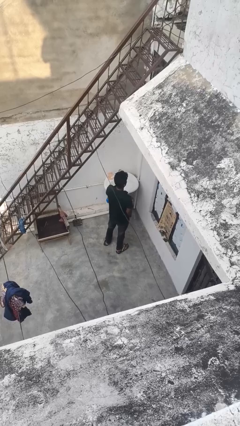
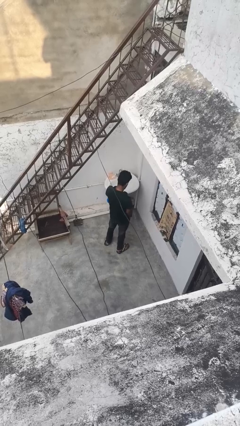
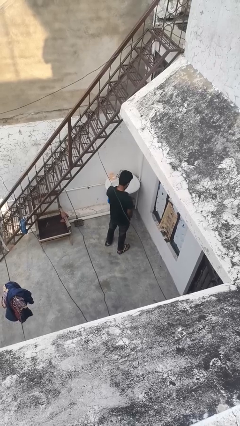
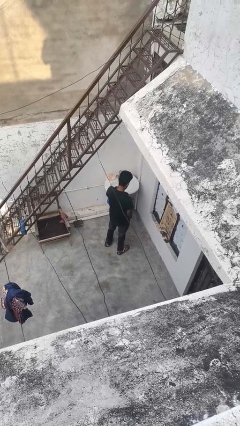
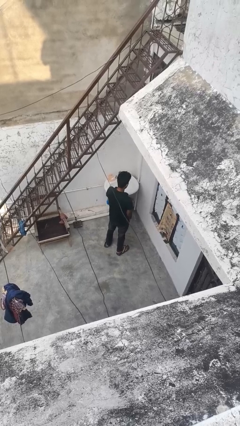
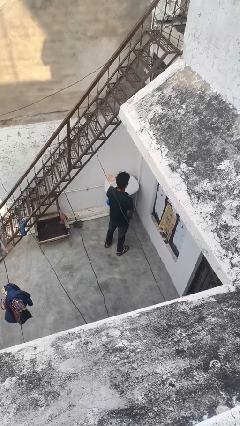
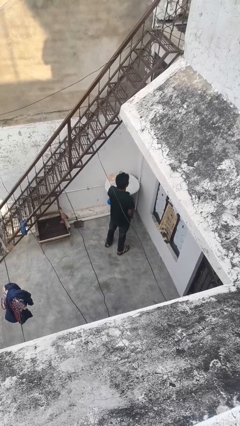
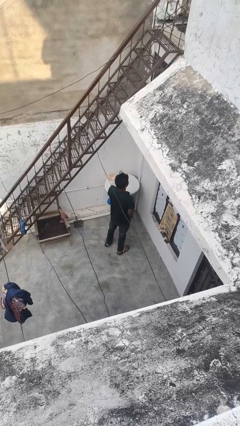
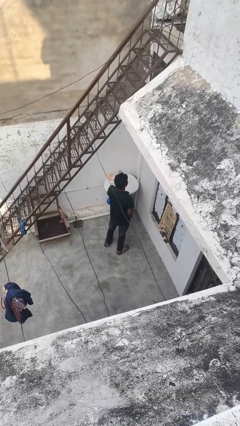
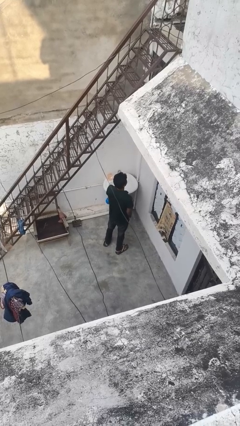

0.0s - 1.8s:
person strokes chin

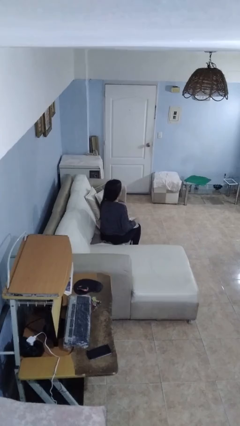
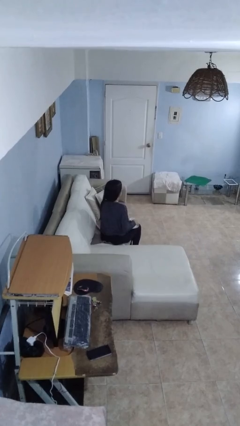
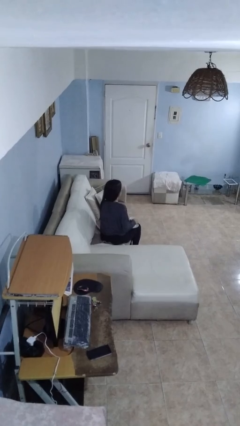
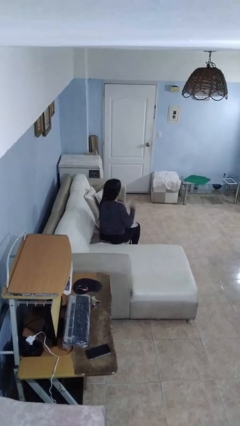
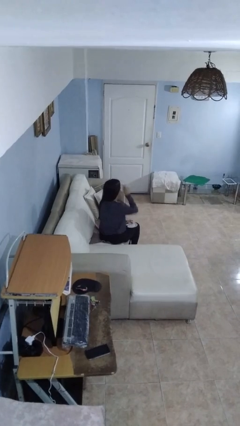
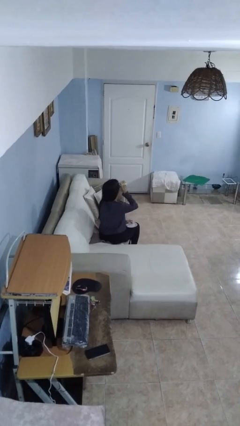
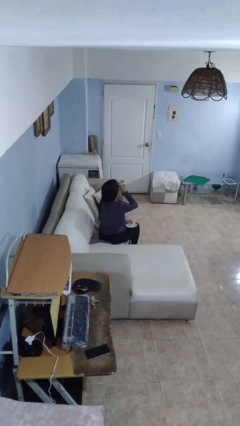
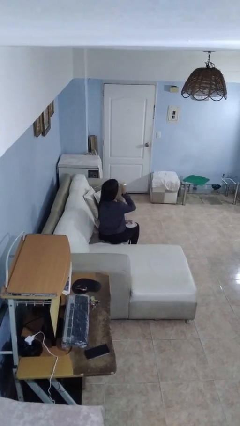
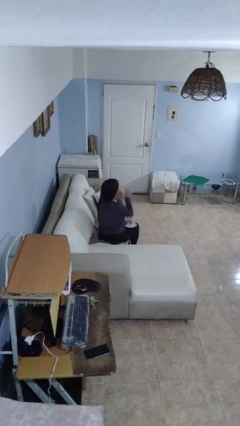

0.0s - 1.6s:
person drinks from mug

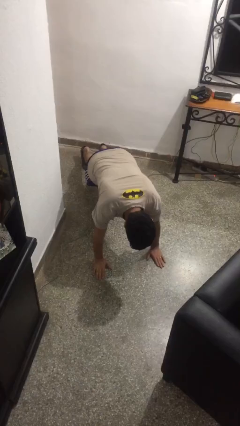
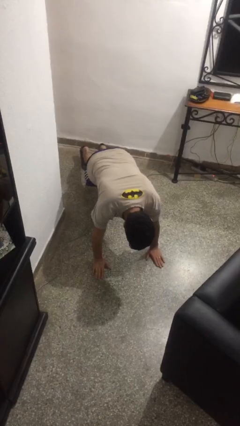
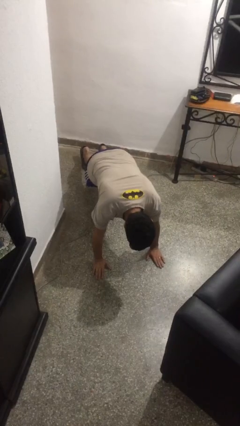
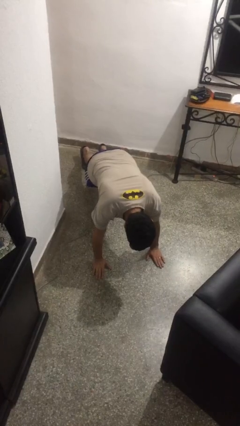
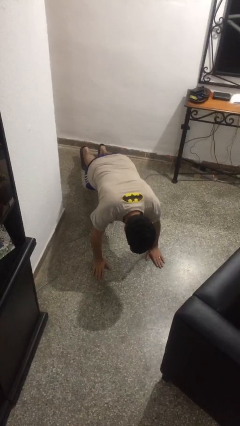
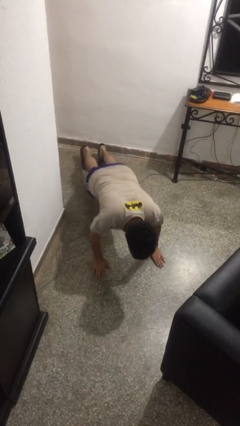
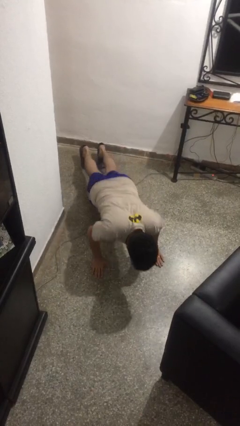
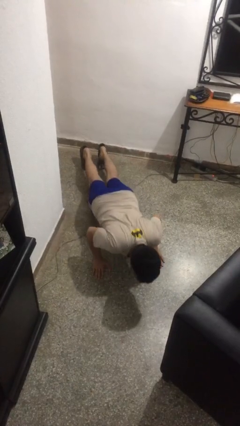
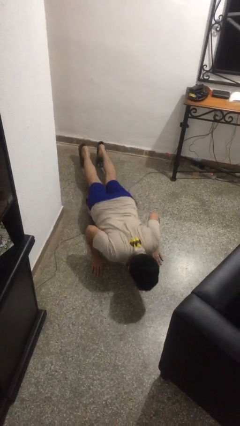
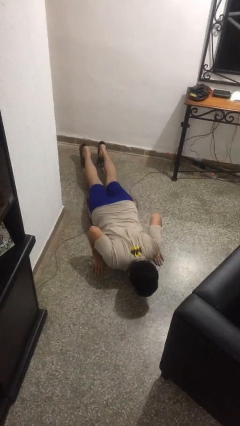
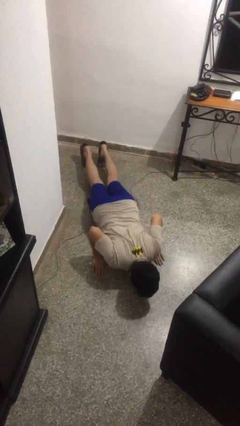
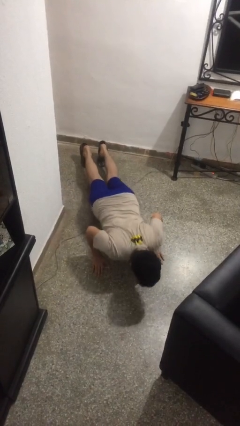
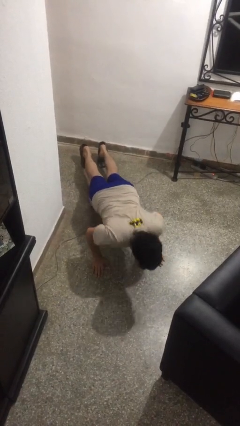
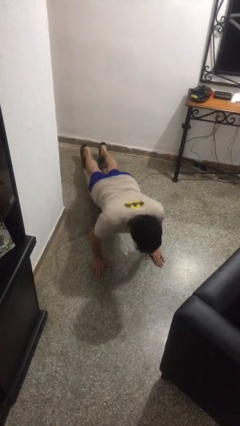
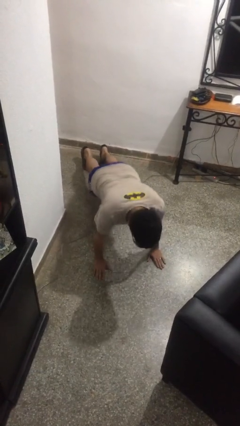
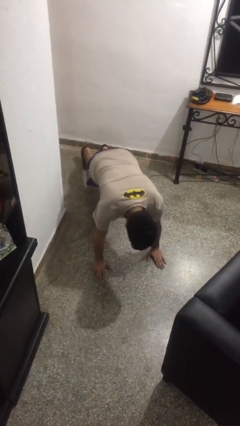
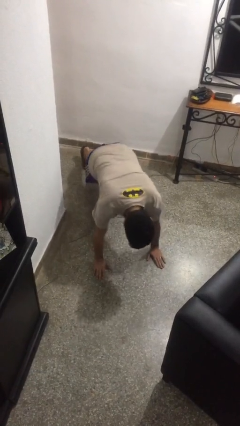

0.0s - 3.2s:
person exercises with pushup

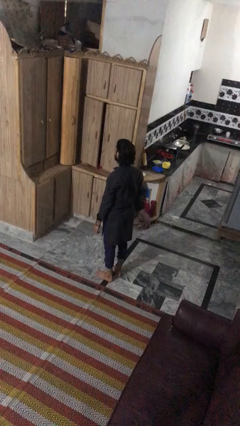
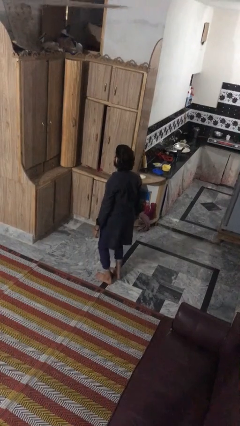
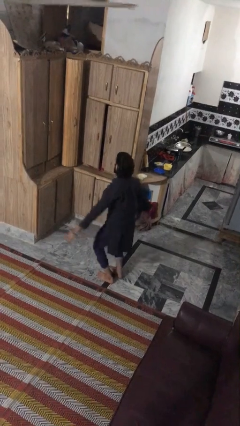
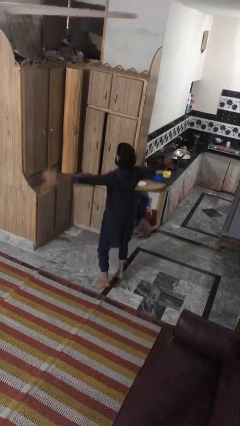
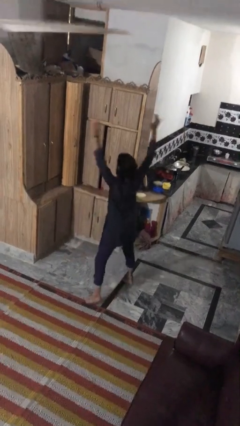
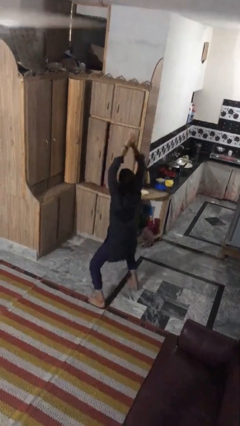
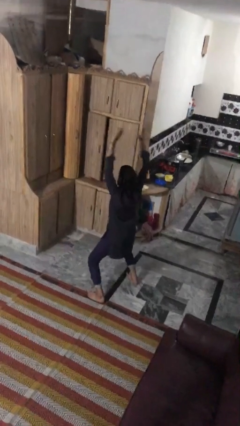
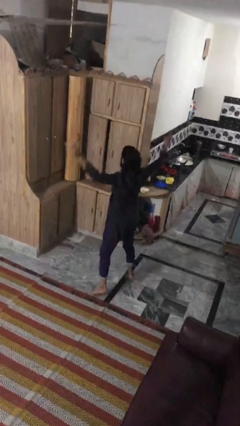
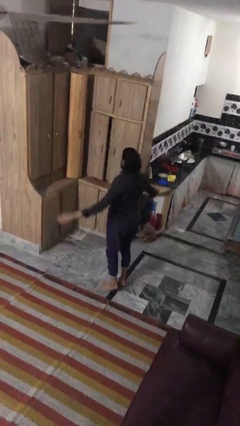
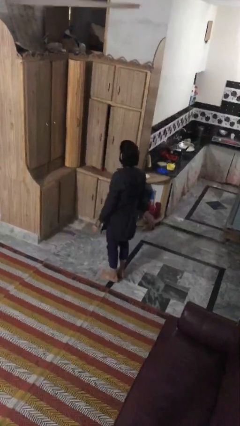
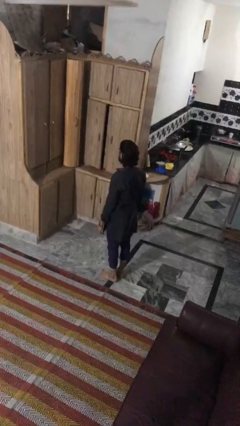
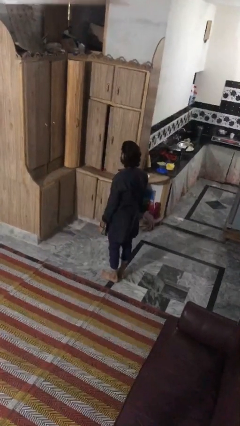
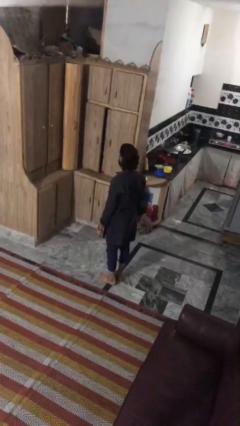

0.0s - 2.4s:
person exercises with jumping jacks

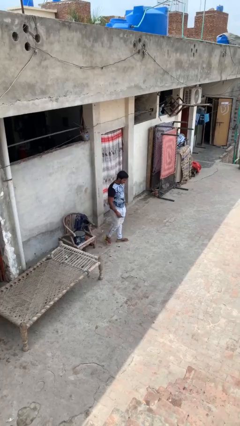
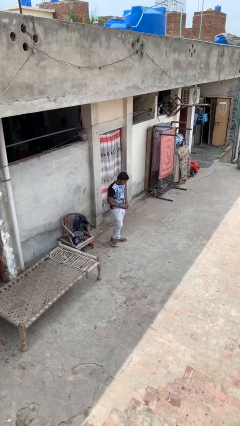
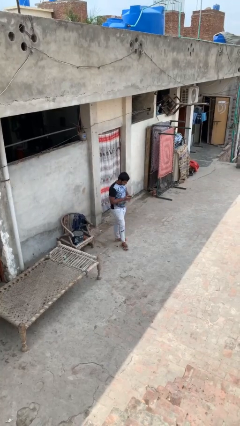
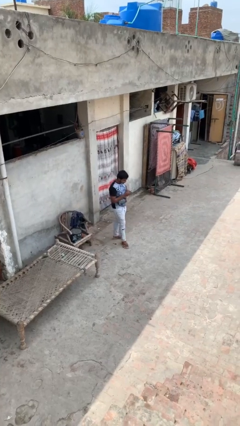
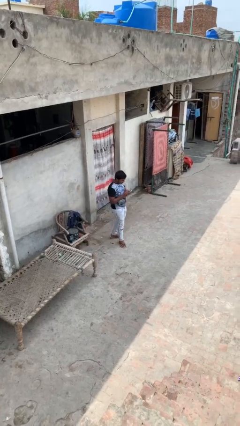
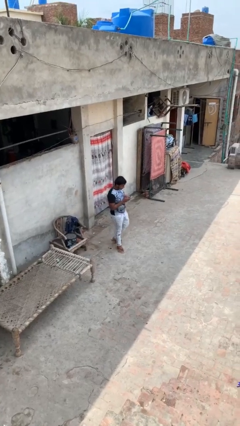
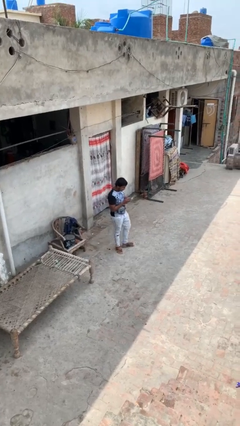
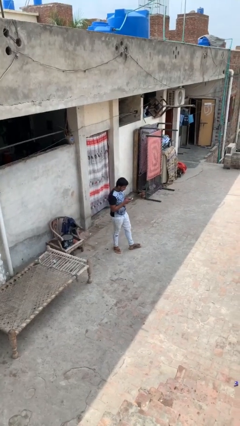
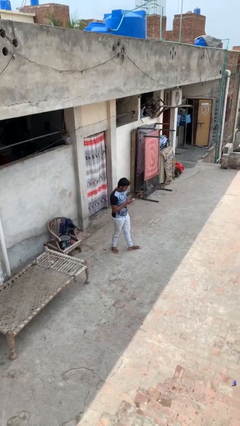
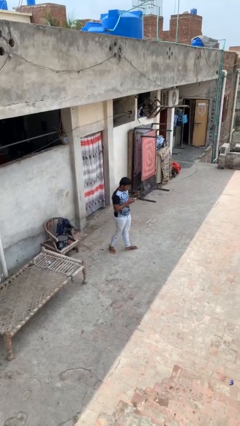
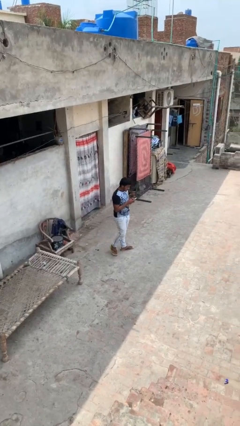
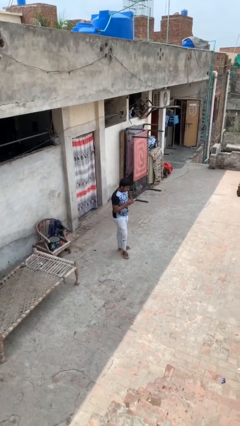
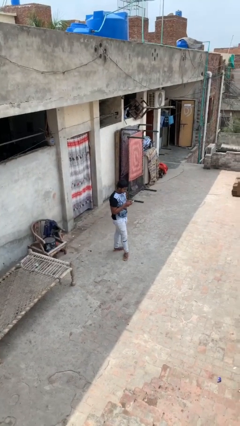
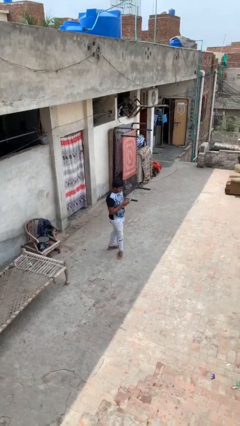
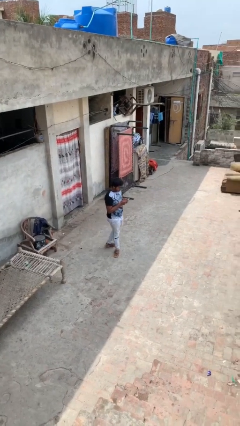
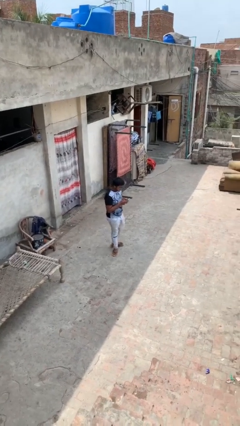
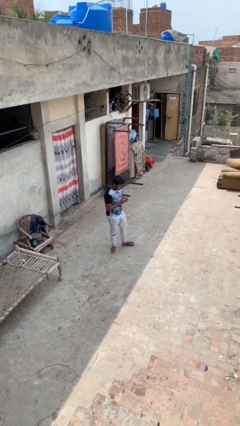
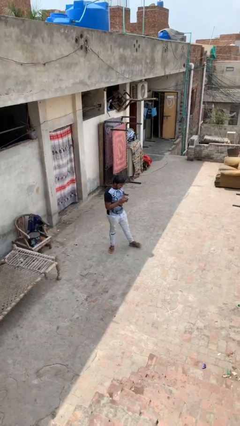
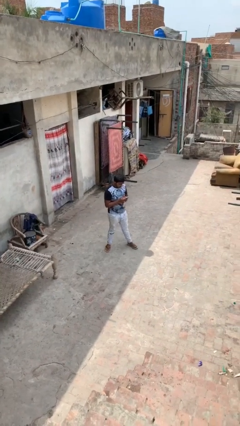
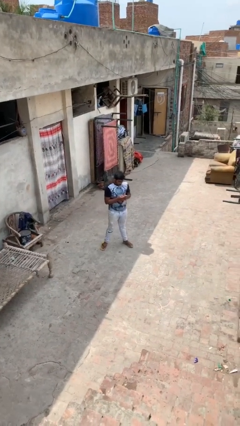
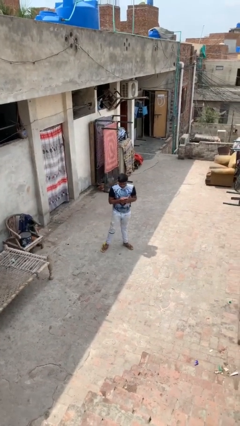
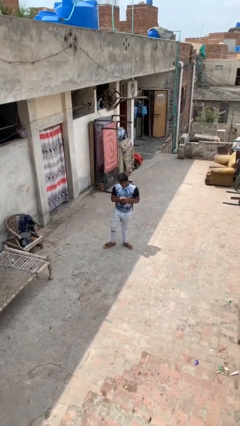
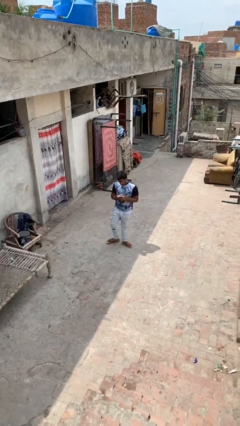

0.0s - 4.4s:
person texts on phone

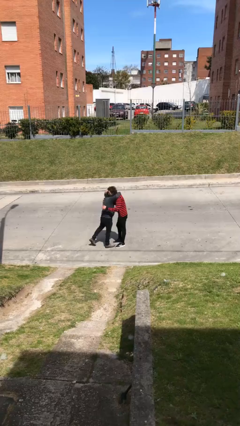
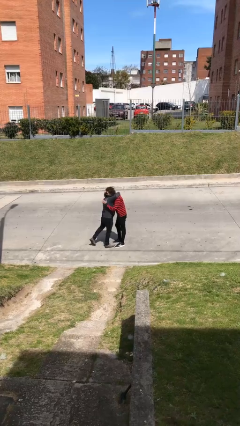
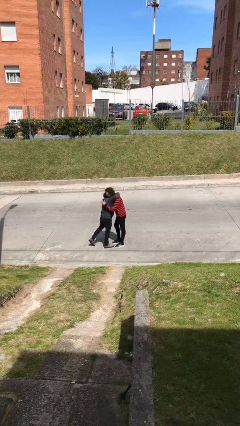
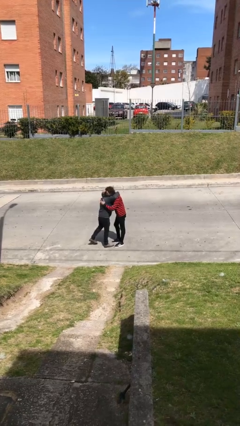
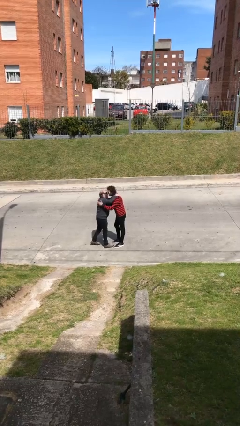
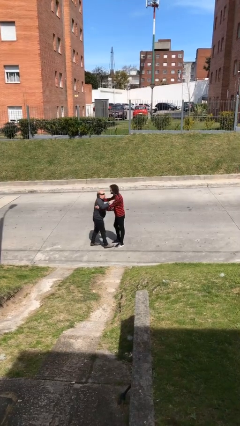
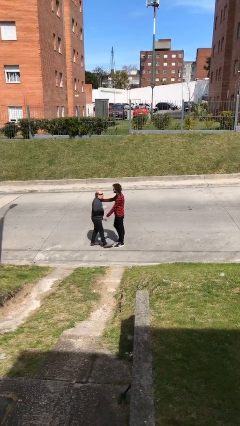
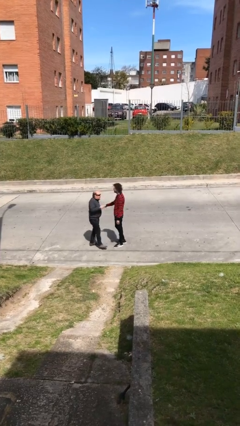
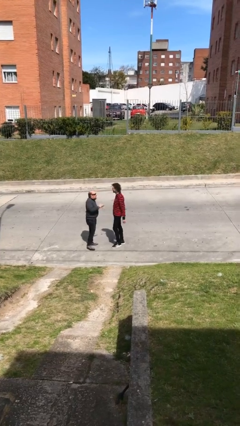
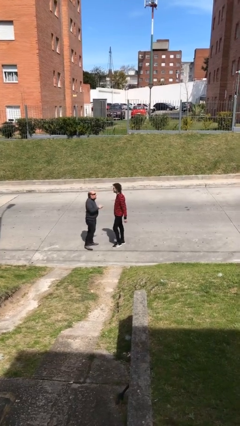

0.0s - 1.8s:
person embraces person

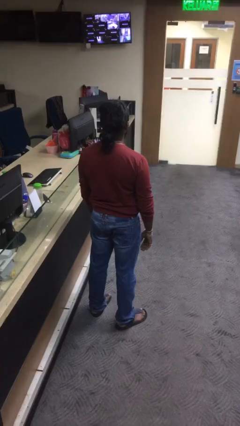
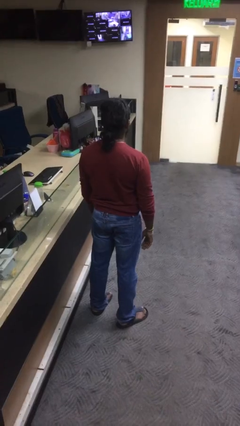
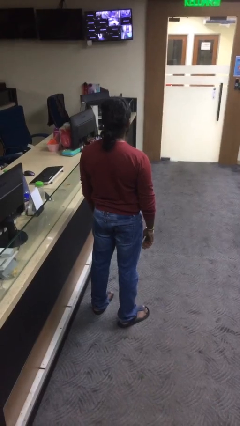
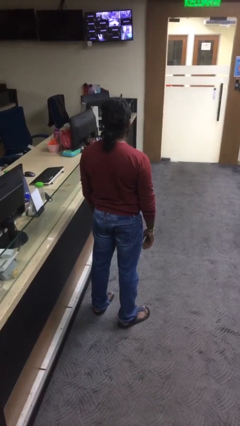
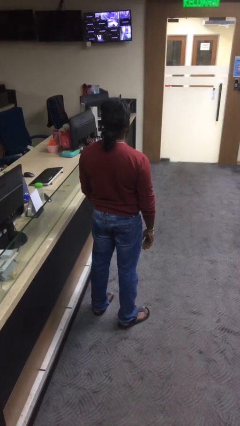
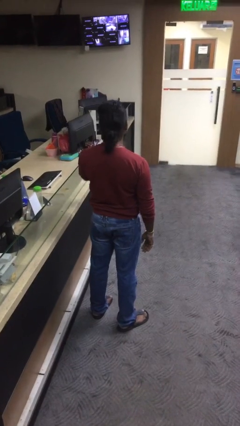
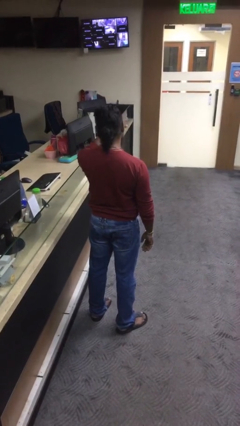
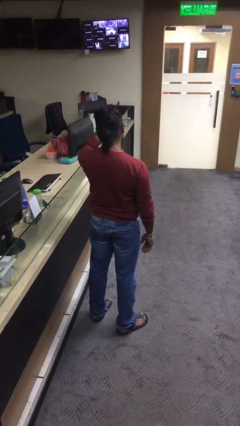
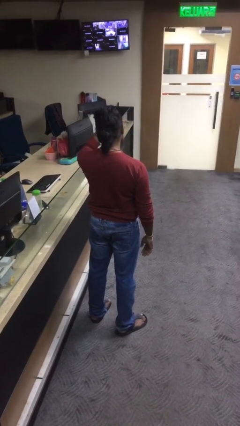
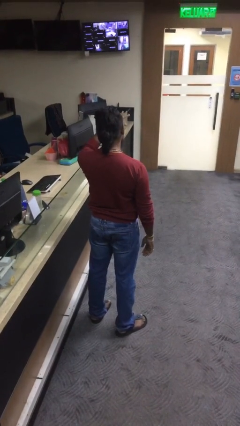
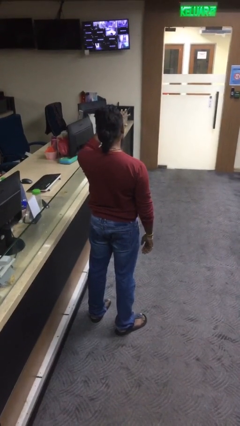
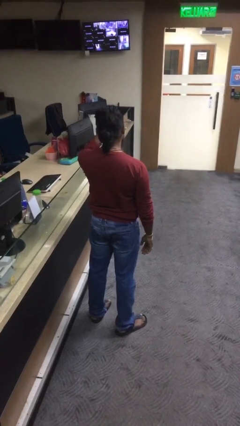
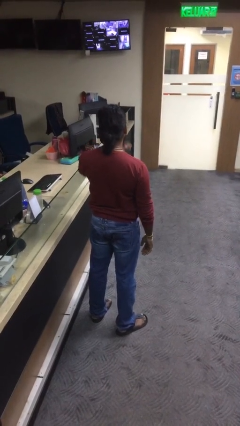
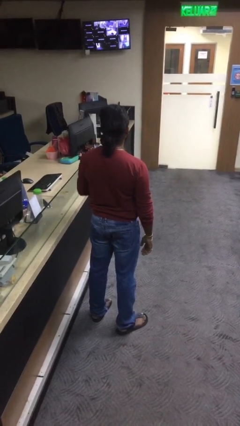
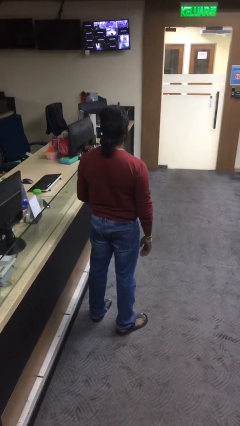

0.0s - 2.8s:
person gestures come here
